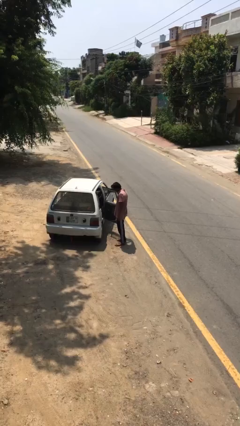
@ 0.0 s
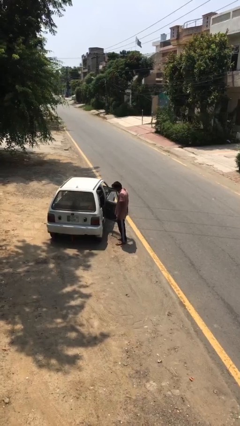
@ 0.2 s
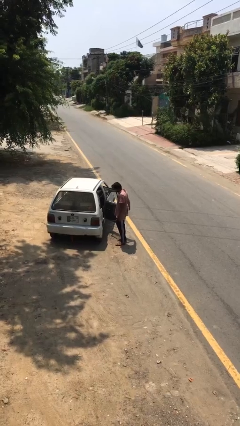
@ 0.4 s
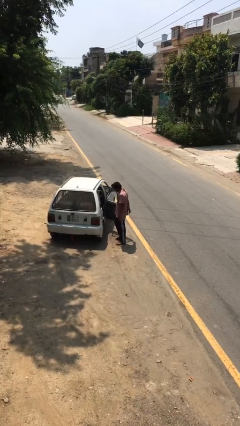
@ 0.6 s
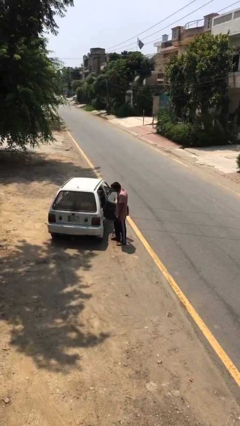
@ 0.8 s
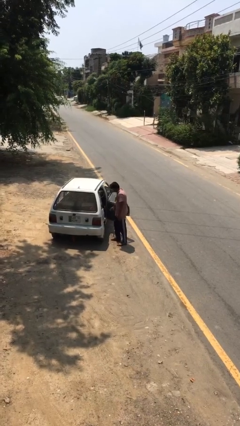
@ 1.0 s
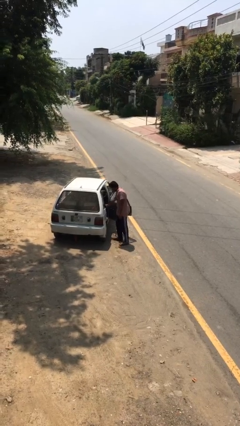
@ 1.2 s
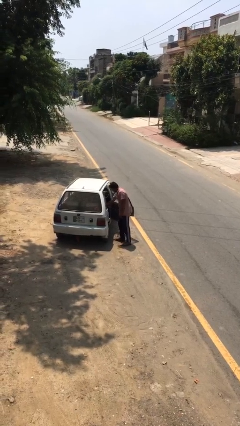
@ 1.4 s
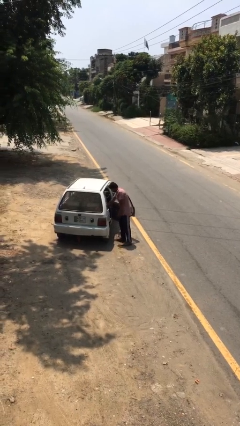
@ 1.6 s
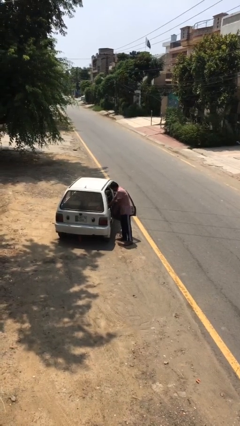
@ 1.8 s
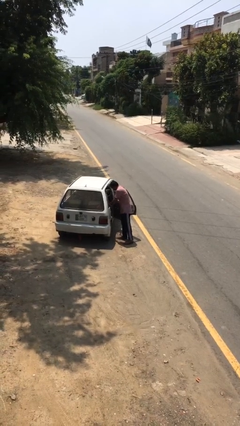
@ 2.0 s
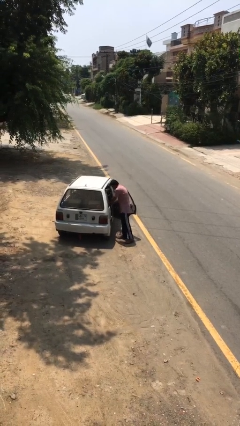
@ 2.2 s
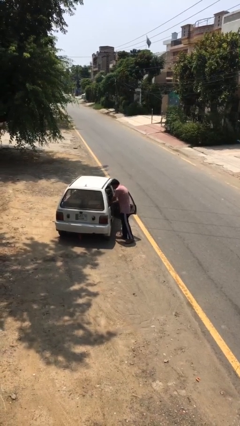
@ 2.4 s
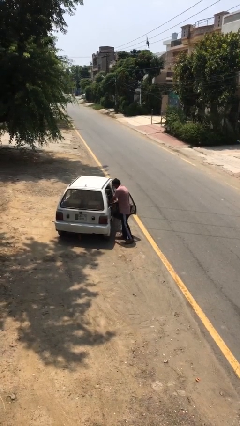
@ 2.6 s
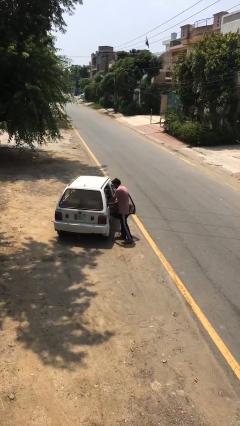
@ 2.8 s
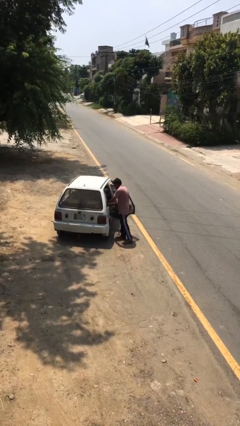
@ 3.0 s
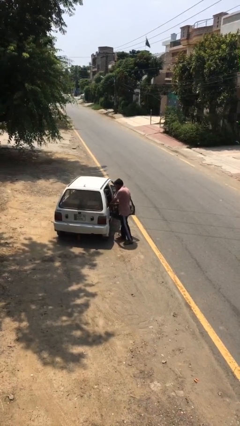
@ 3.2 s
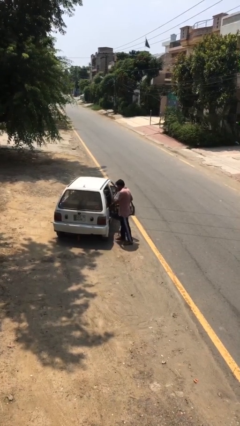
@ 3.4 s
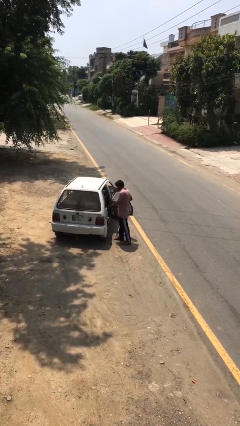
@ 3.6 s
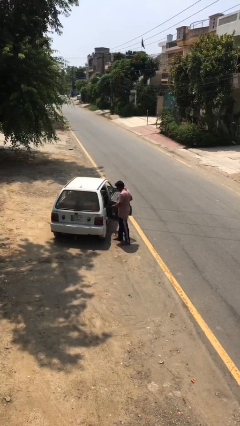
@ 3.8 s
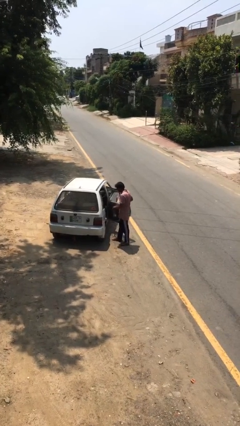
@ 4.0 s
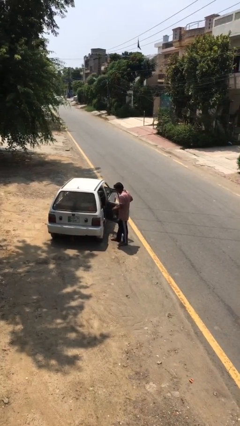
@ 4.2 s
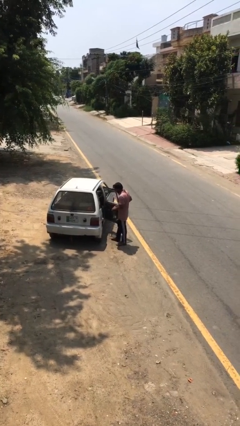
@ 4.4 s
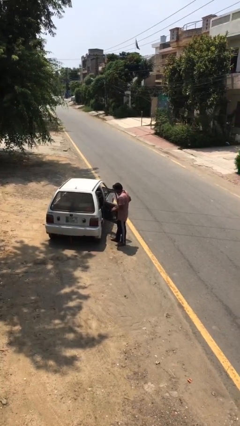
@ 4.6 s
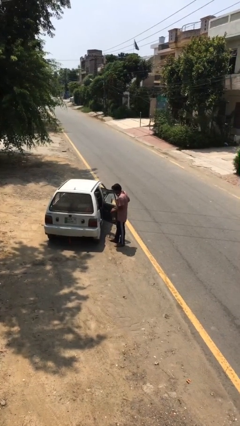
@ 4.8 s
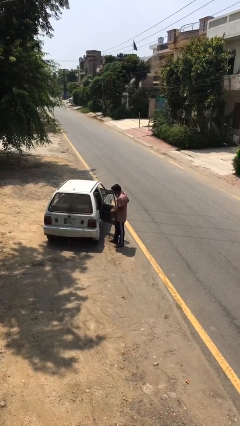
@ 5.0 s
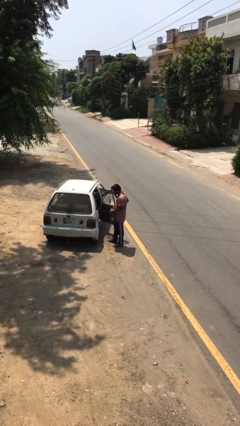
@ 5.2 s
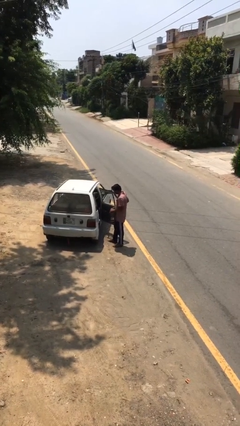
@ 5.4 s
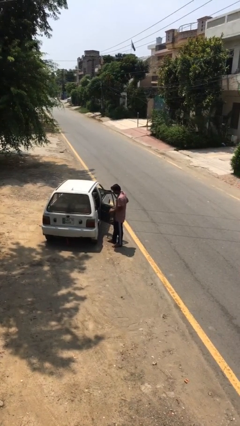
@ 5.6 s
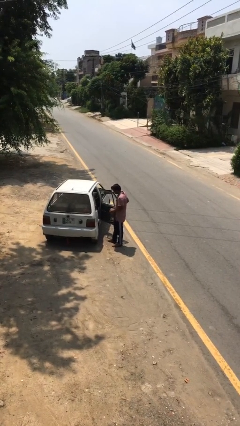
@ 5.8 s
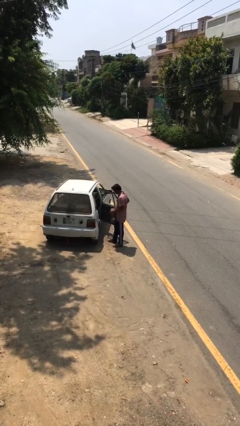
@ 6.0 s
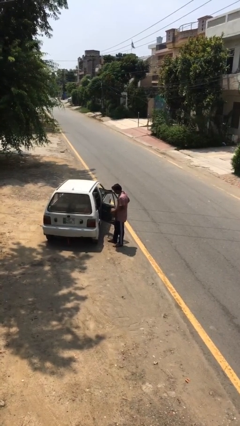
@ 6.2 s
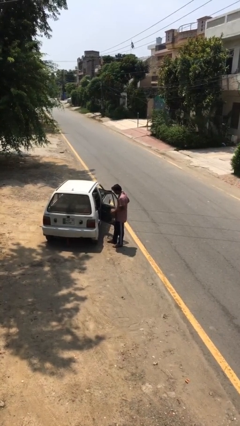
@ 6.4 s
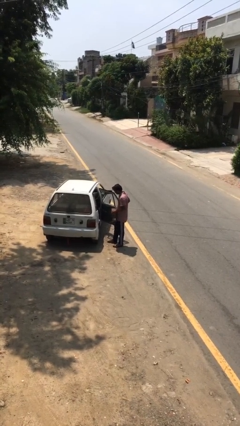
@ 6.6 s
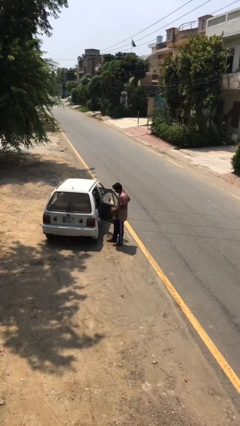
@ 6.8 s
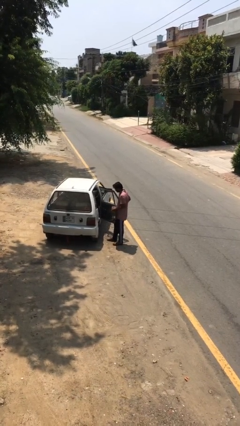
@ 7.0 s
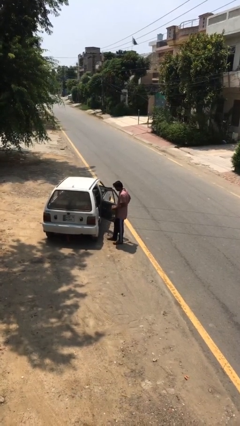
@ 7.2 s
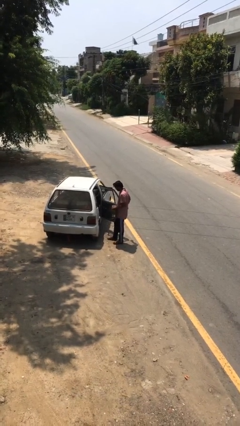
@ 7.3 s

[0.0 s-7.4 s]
person unloads car

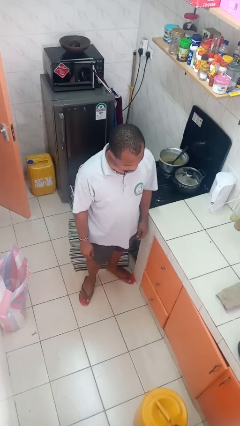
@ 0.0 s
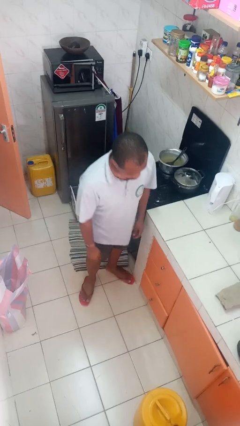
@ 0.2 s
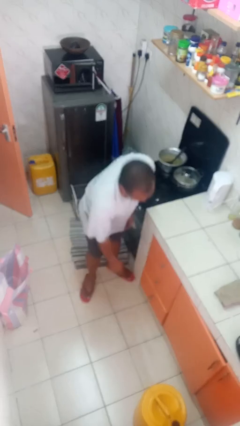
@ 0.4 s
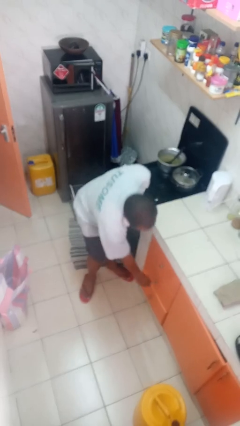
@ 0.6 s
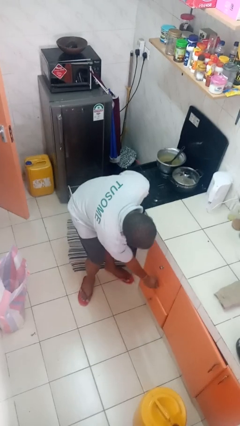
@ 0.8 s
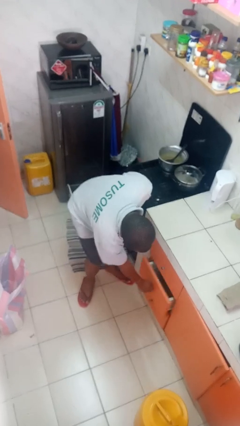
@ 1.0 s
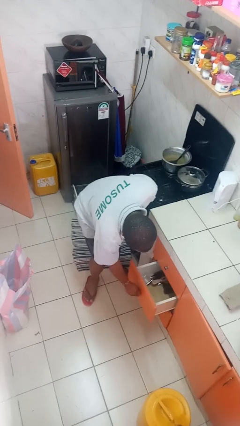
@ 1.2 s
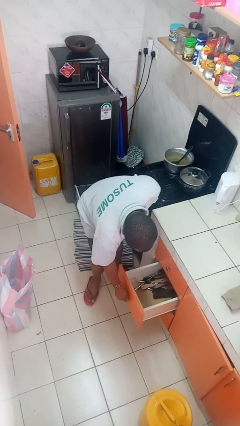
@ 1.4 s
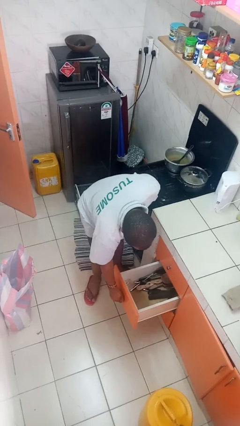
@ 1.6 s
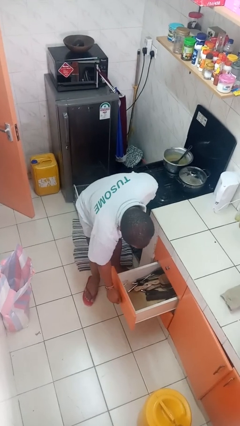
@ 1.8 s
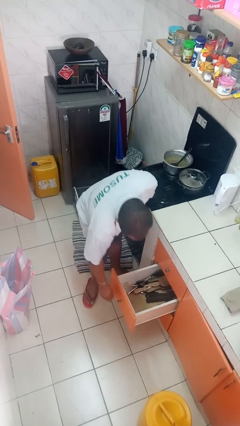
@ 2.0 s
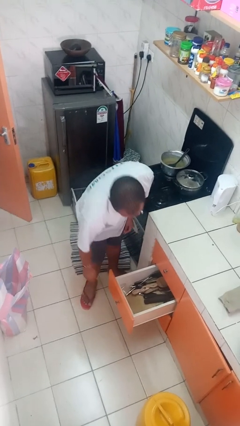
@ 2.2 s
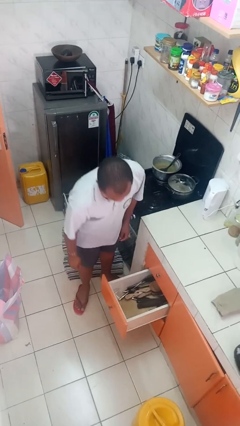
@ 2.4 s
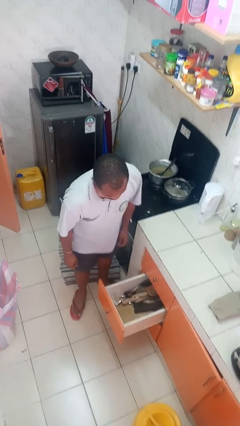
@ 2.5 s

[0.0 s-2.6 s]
person opens kitchen drawer

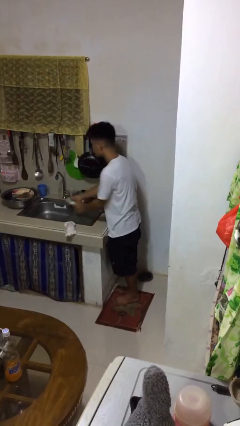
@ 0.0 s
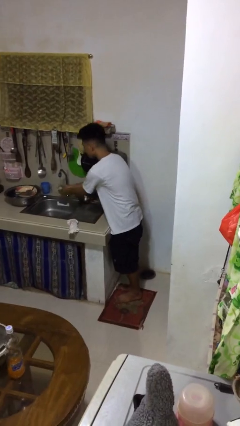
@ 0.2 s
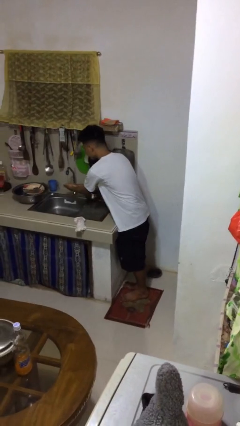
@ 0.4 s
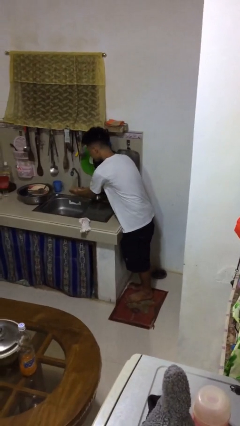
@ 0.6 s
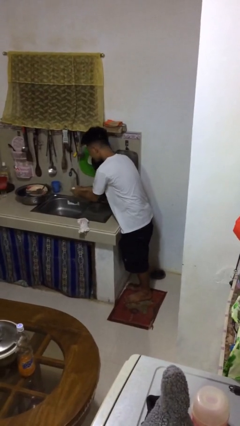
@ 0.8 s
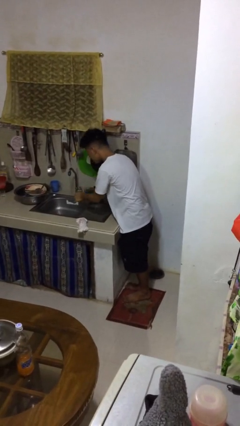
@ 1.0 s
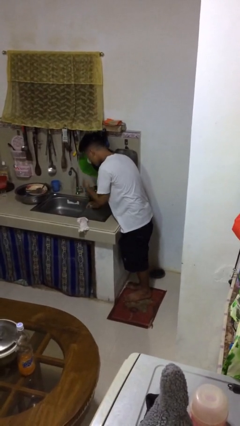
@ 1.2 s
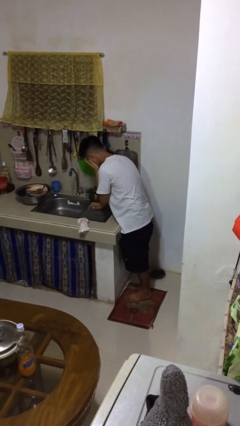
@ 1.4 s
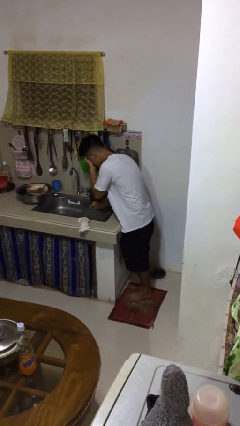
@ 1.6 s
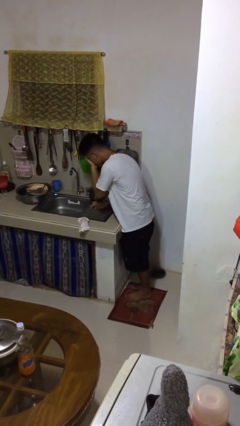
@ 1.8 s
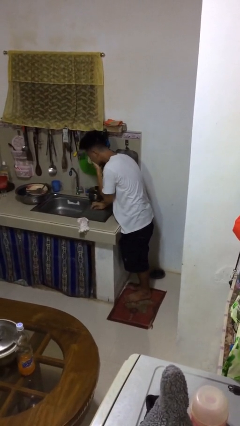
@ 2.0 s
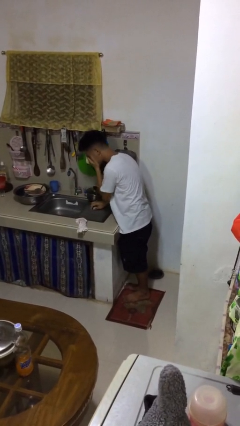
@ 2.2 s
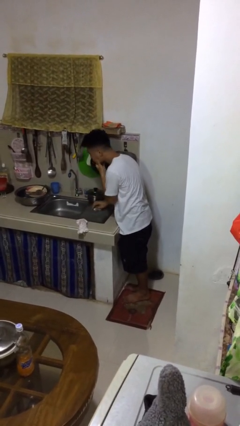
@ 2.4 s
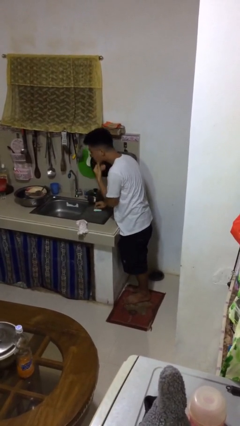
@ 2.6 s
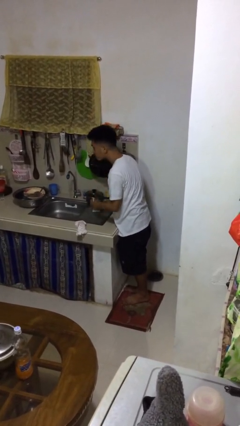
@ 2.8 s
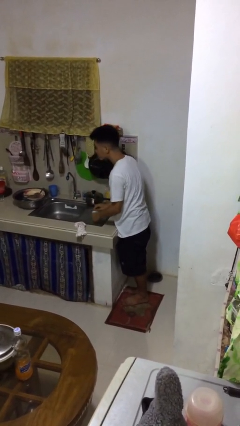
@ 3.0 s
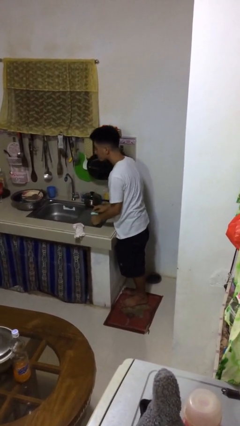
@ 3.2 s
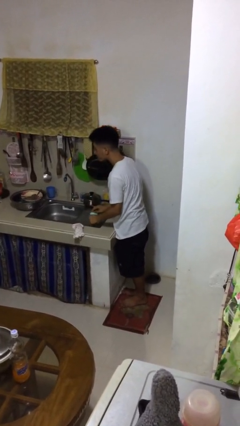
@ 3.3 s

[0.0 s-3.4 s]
person washes face

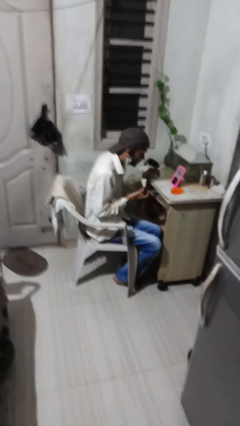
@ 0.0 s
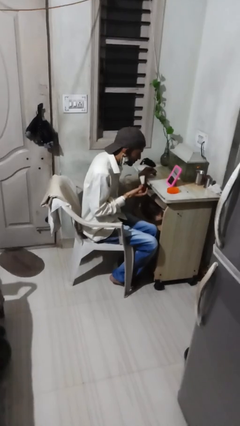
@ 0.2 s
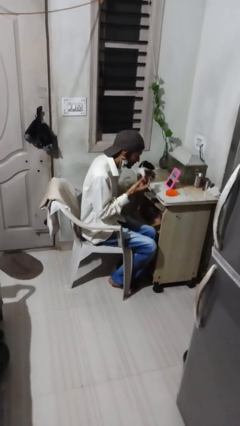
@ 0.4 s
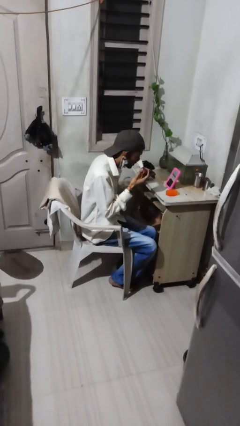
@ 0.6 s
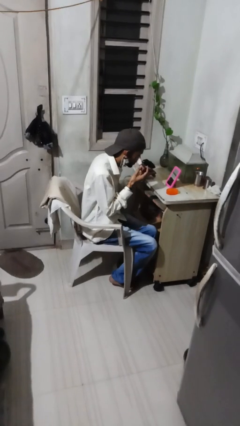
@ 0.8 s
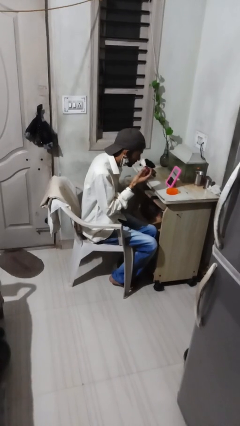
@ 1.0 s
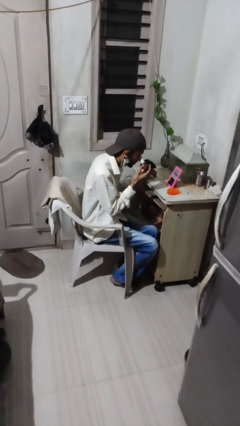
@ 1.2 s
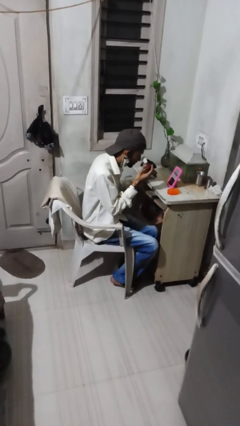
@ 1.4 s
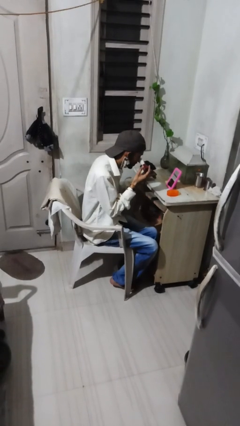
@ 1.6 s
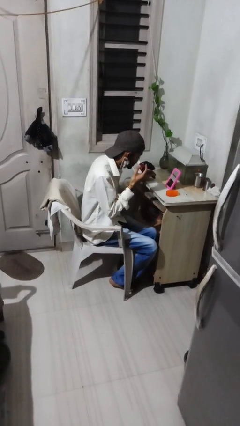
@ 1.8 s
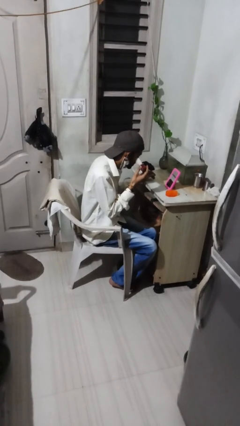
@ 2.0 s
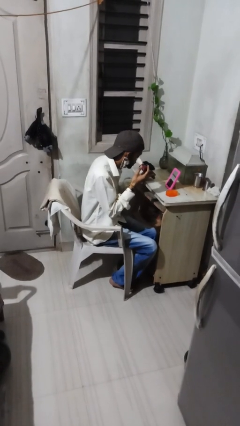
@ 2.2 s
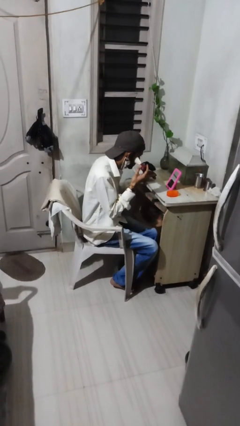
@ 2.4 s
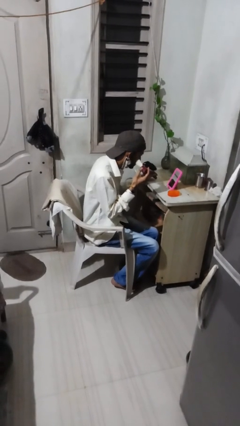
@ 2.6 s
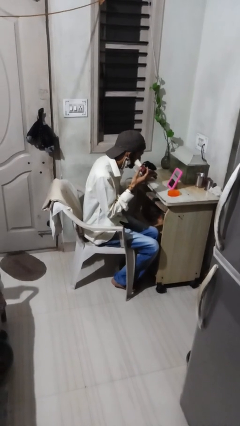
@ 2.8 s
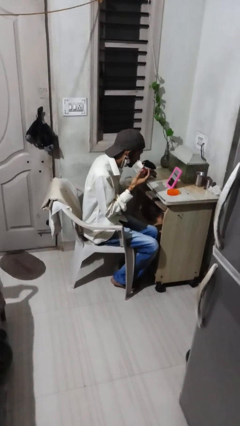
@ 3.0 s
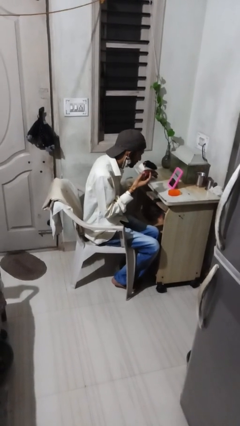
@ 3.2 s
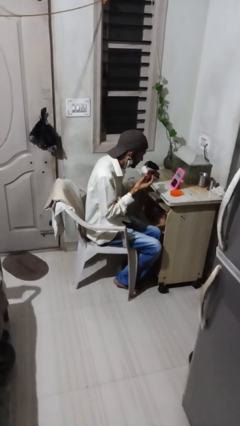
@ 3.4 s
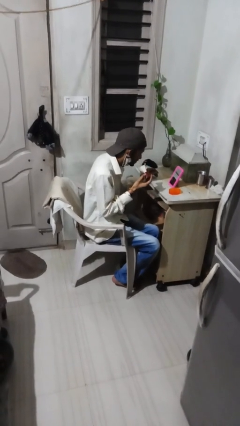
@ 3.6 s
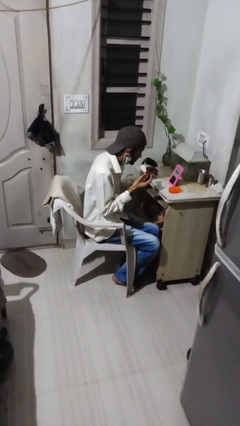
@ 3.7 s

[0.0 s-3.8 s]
person applies foundation makeup

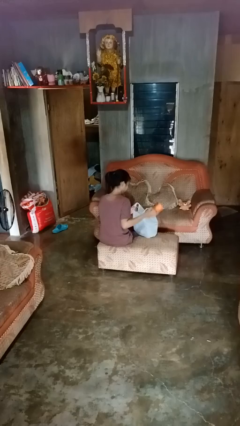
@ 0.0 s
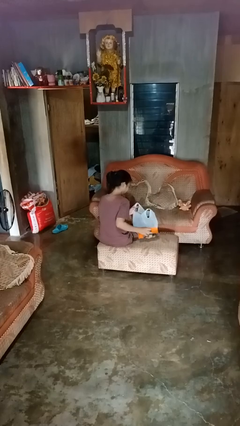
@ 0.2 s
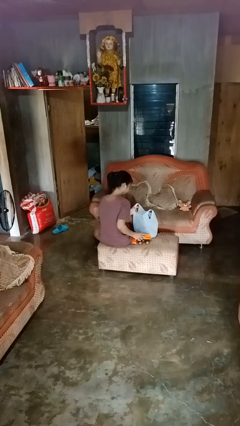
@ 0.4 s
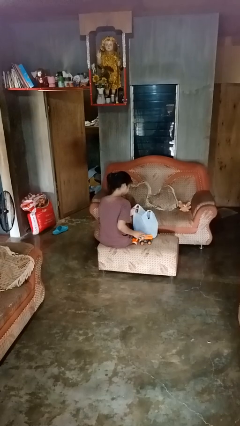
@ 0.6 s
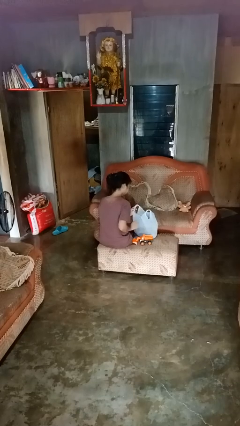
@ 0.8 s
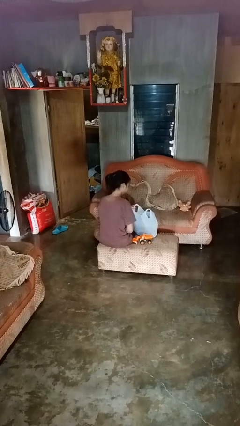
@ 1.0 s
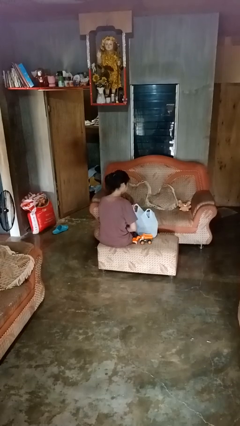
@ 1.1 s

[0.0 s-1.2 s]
person takes object from bag
